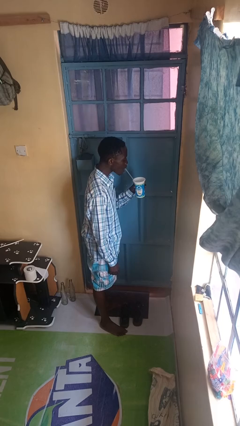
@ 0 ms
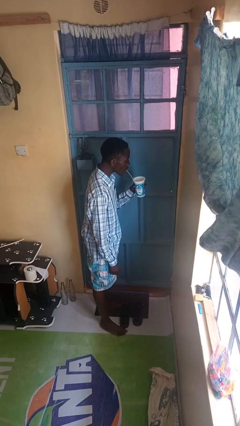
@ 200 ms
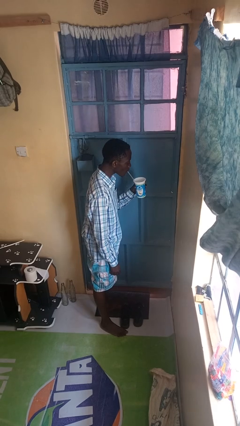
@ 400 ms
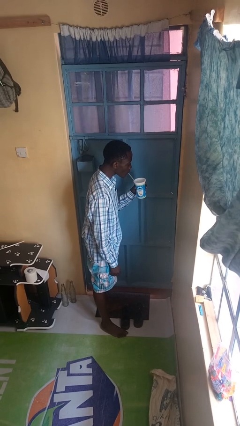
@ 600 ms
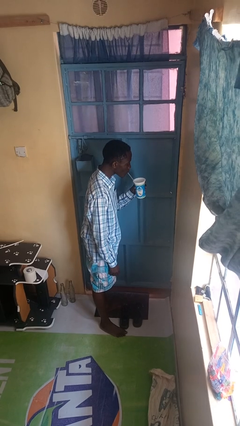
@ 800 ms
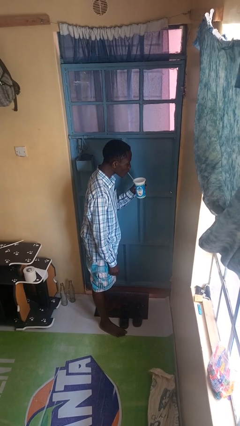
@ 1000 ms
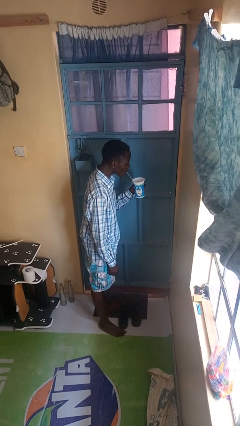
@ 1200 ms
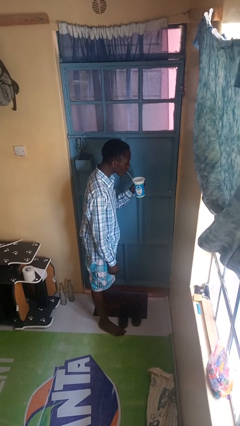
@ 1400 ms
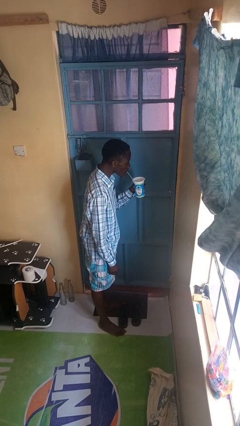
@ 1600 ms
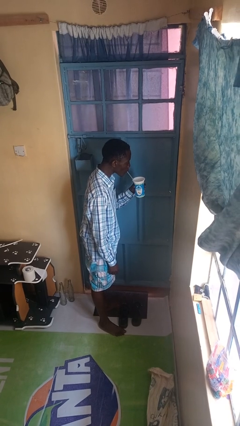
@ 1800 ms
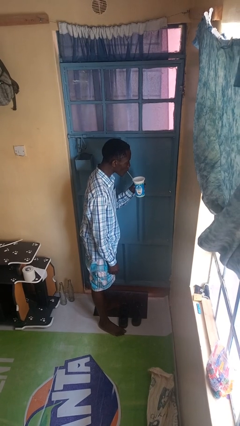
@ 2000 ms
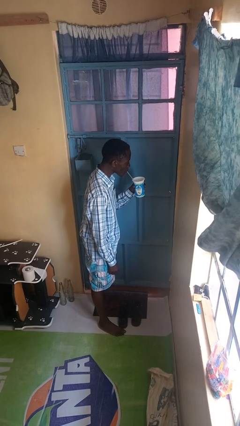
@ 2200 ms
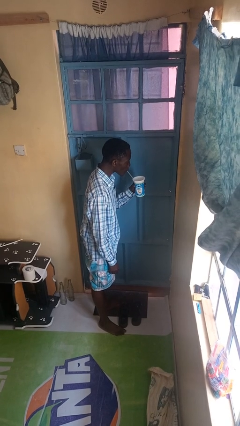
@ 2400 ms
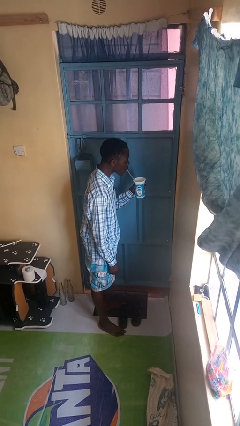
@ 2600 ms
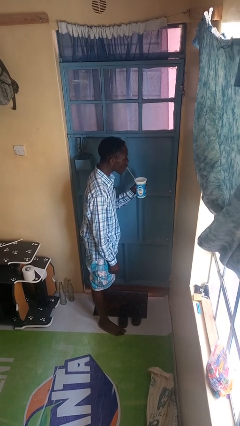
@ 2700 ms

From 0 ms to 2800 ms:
person drinks from straw

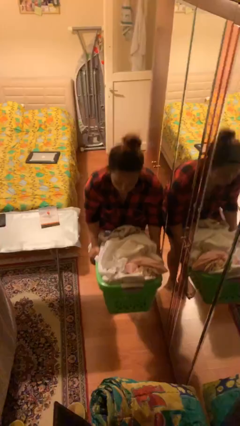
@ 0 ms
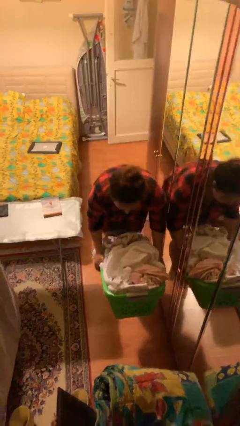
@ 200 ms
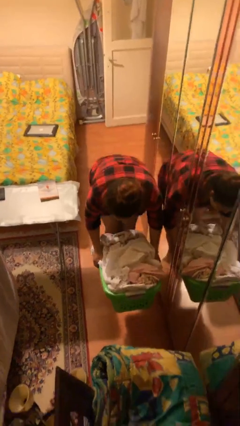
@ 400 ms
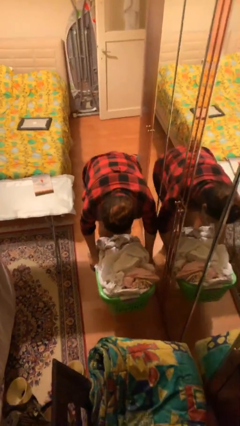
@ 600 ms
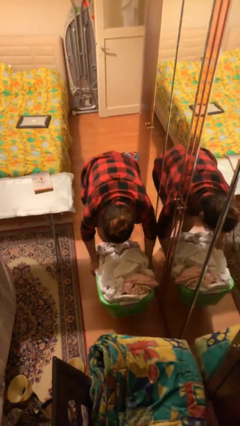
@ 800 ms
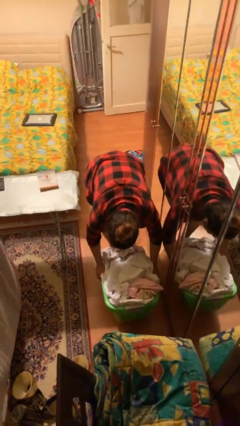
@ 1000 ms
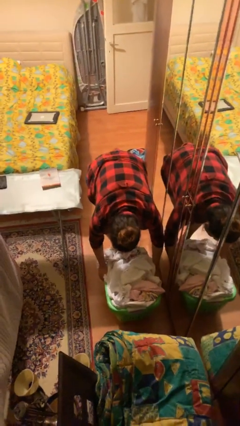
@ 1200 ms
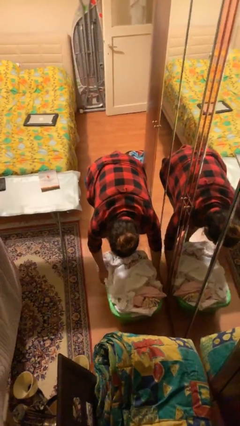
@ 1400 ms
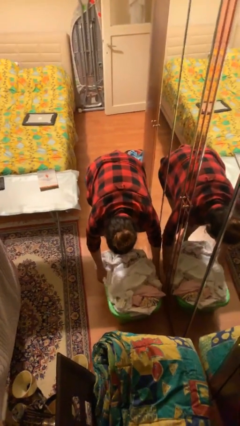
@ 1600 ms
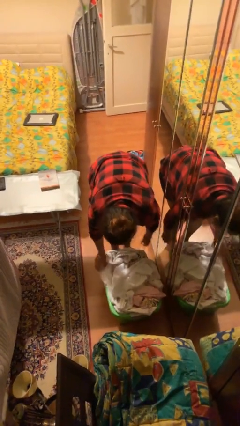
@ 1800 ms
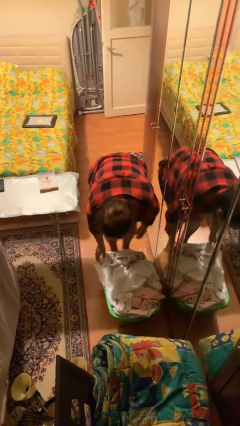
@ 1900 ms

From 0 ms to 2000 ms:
person puts down object on floor

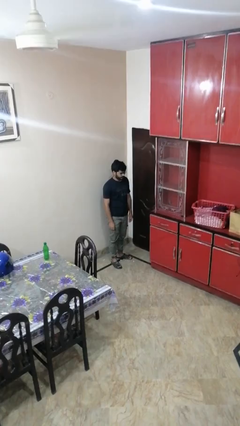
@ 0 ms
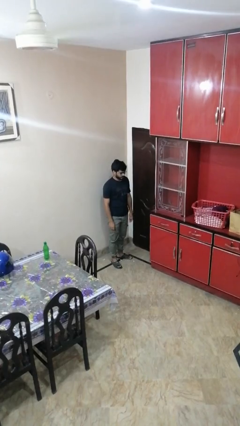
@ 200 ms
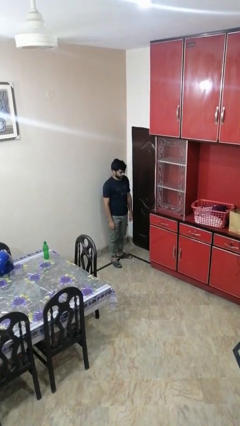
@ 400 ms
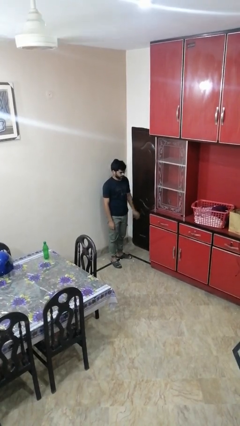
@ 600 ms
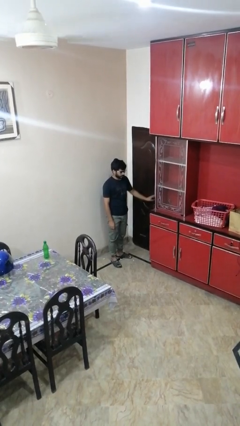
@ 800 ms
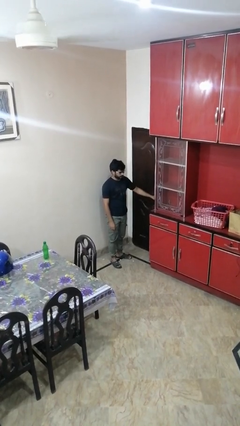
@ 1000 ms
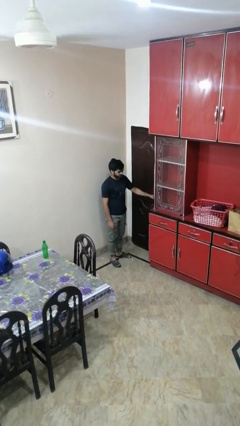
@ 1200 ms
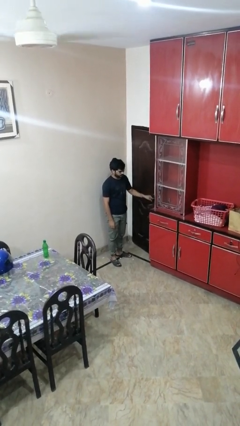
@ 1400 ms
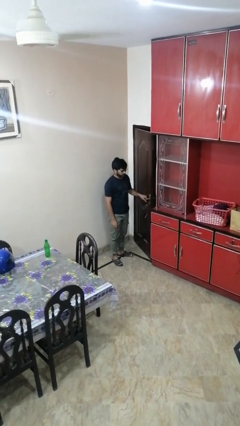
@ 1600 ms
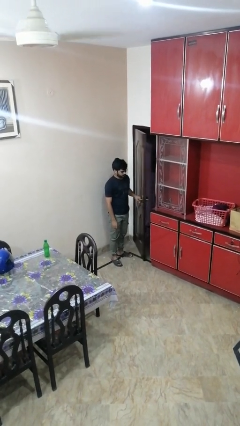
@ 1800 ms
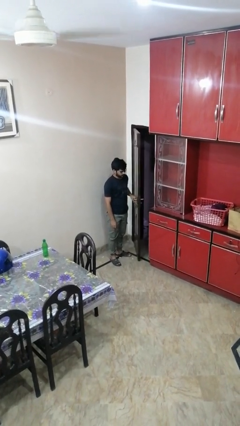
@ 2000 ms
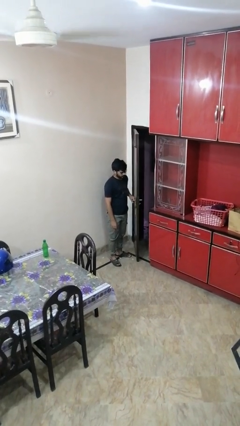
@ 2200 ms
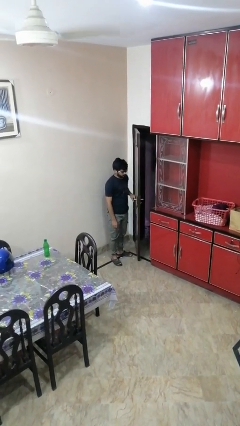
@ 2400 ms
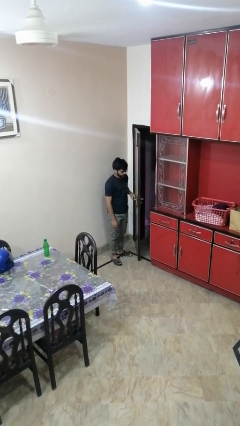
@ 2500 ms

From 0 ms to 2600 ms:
person opens facility door

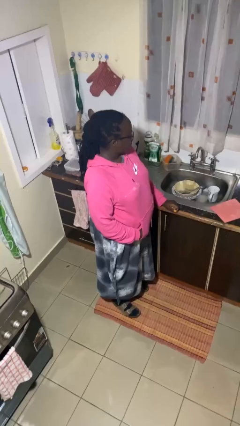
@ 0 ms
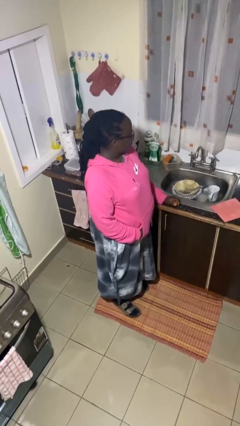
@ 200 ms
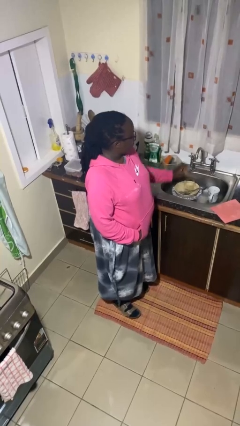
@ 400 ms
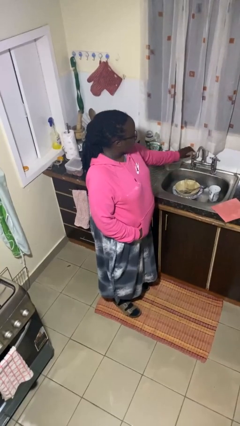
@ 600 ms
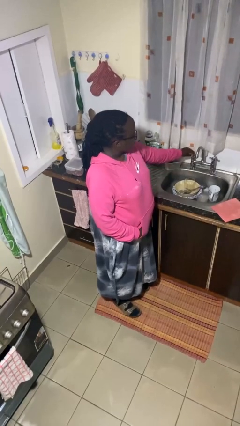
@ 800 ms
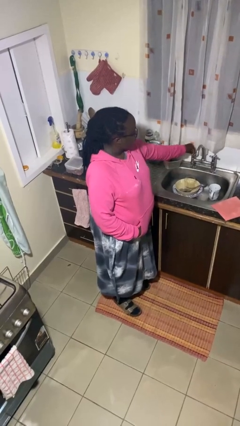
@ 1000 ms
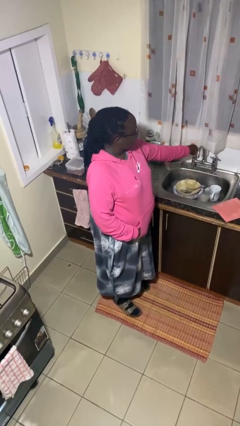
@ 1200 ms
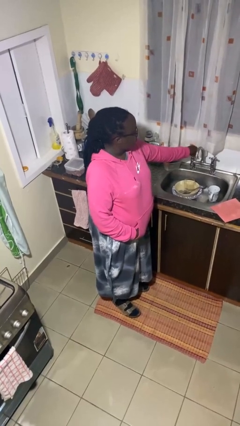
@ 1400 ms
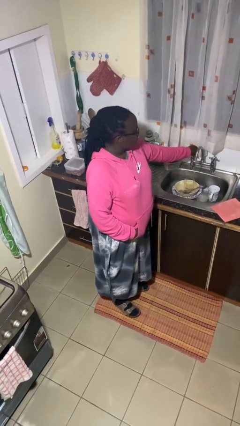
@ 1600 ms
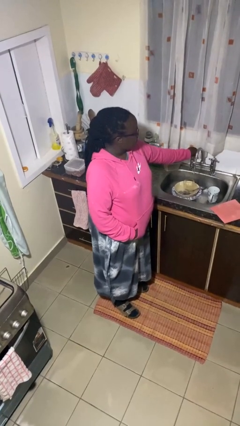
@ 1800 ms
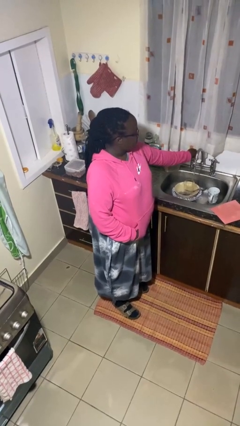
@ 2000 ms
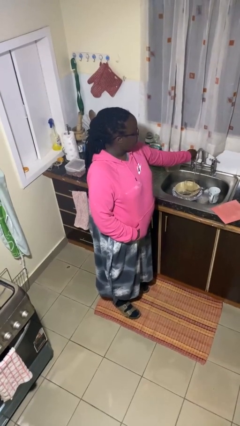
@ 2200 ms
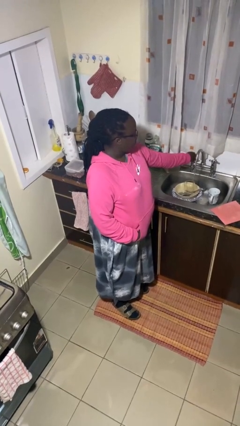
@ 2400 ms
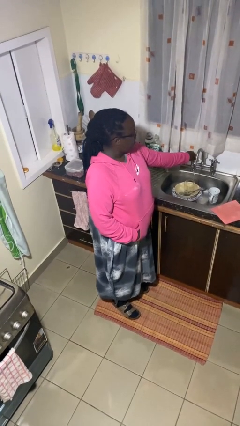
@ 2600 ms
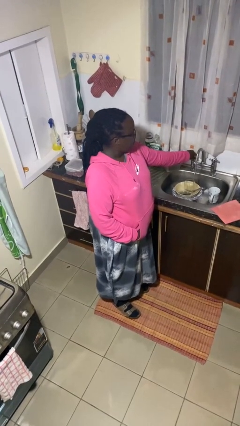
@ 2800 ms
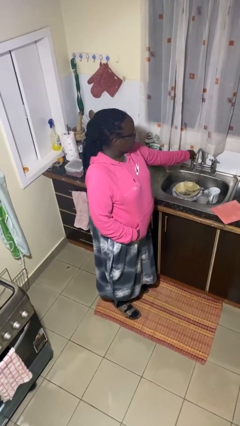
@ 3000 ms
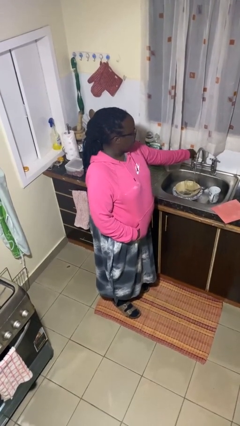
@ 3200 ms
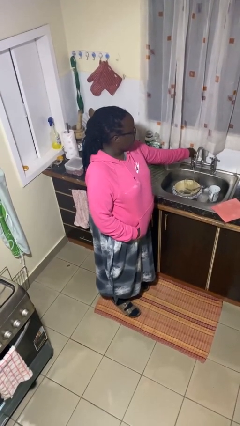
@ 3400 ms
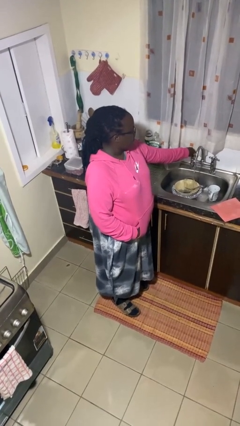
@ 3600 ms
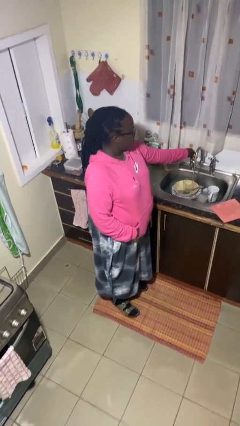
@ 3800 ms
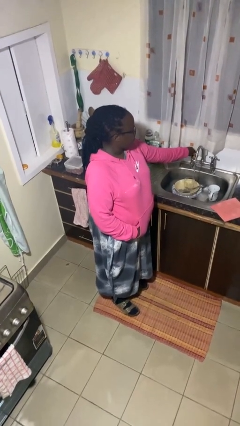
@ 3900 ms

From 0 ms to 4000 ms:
person turns on faucet

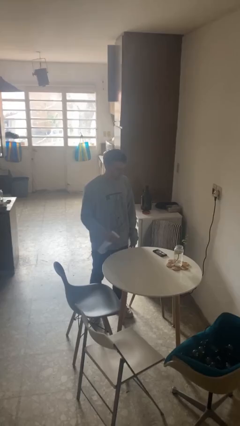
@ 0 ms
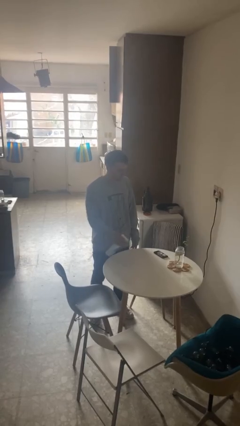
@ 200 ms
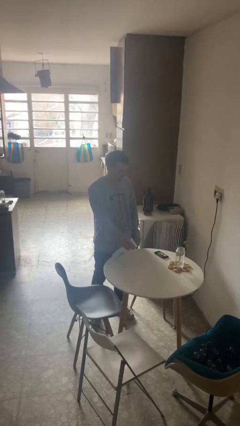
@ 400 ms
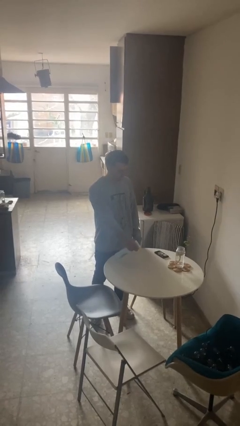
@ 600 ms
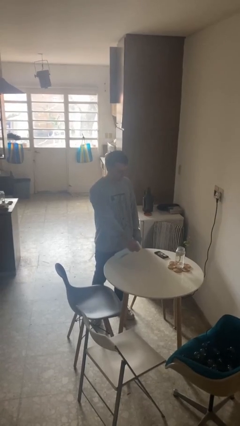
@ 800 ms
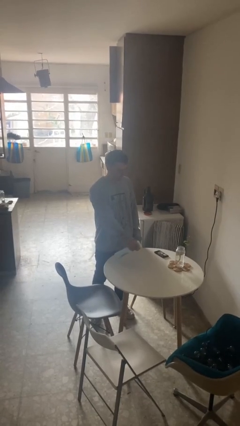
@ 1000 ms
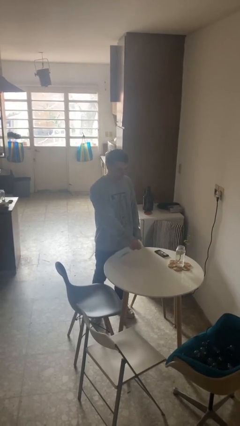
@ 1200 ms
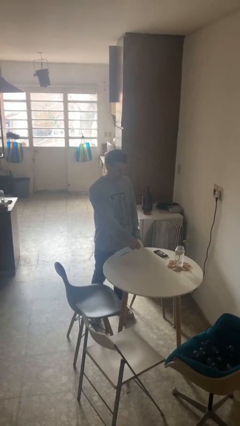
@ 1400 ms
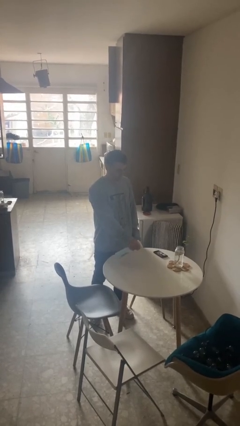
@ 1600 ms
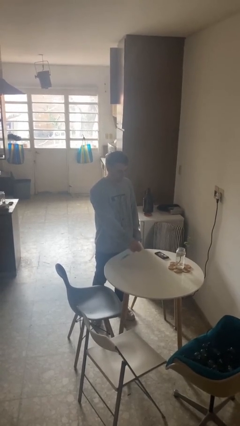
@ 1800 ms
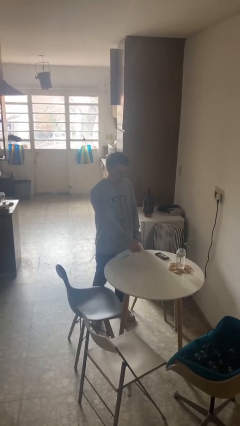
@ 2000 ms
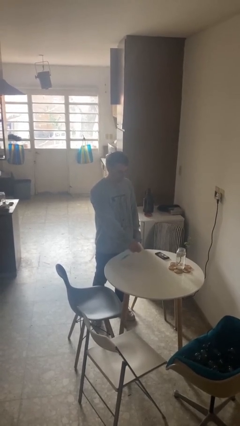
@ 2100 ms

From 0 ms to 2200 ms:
person sprays from bottle

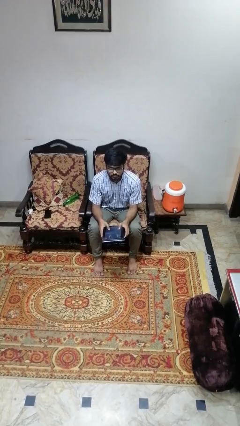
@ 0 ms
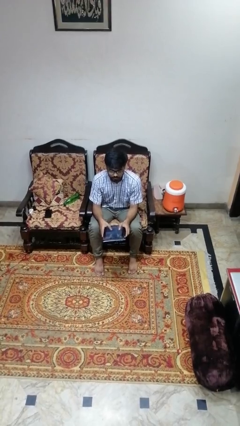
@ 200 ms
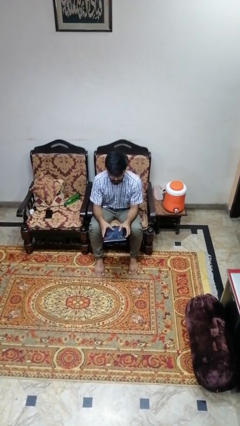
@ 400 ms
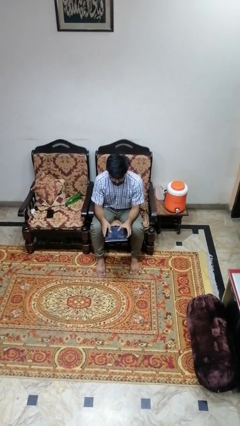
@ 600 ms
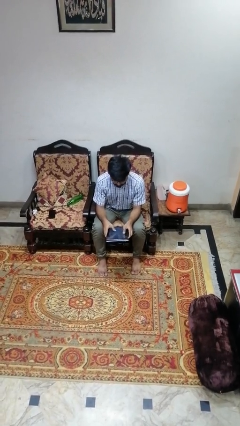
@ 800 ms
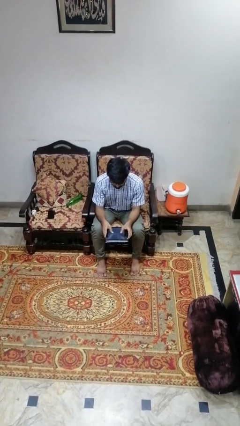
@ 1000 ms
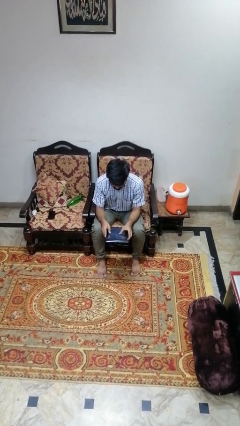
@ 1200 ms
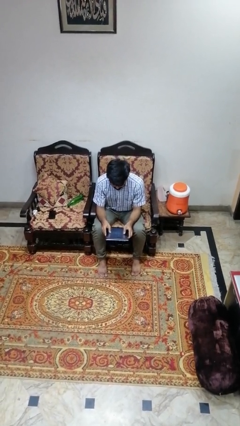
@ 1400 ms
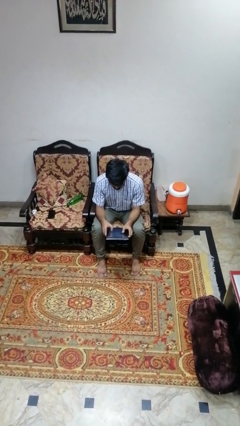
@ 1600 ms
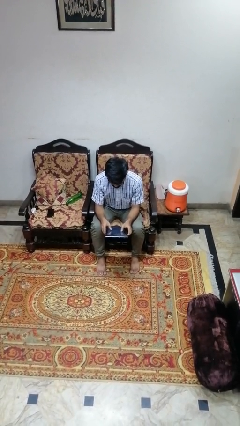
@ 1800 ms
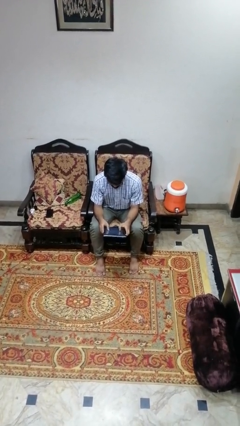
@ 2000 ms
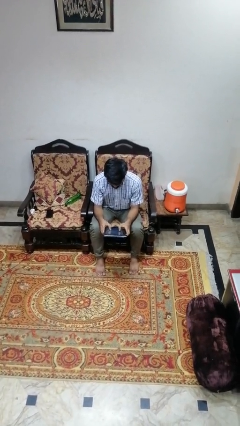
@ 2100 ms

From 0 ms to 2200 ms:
person interacts with tablet

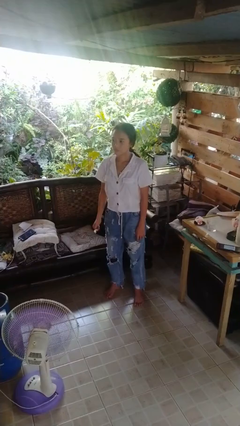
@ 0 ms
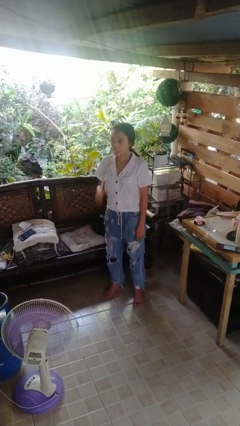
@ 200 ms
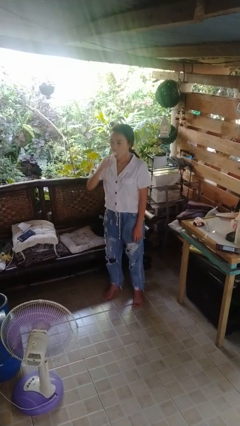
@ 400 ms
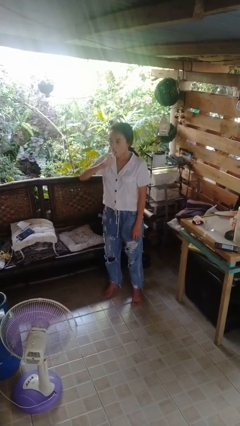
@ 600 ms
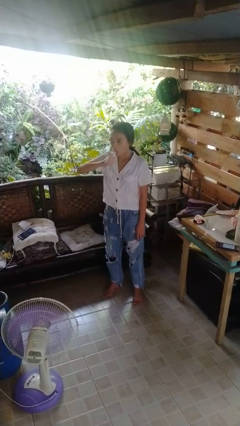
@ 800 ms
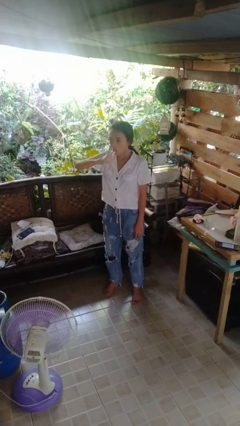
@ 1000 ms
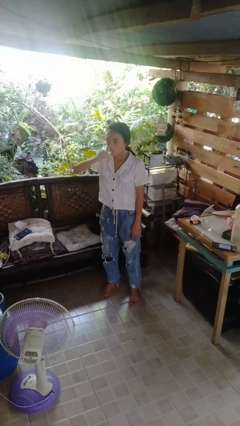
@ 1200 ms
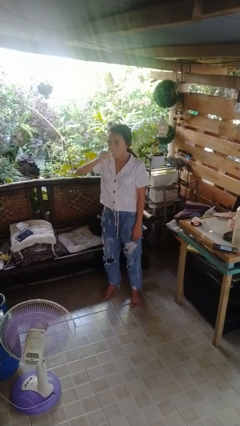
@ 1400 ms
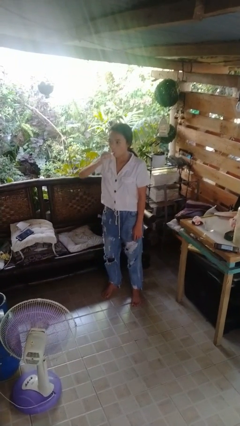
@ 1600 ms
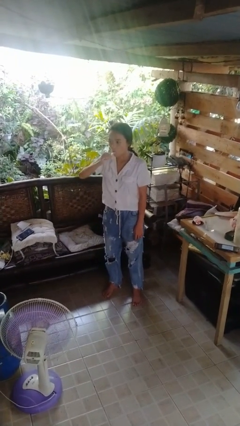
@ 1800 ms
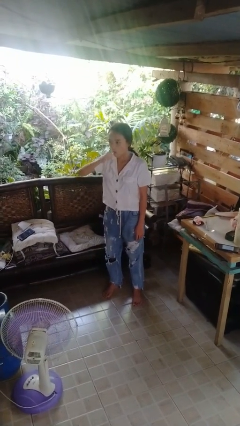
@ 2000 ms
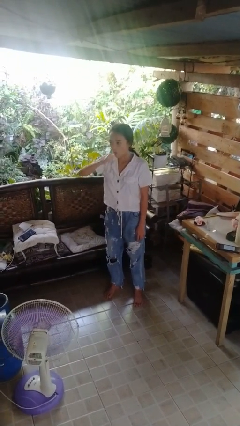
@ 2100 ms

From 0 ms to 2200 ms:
person brushes teeth
